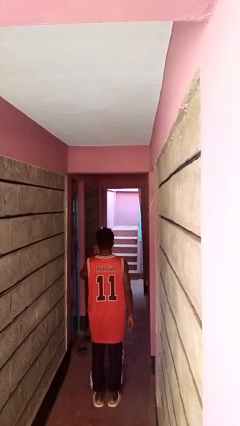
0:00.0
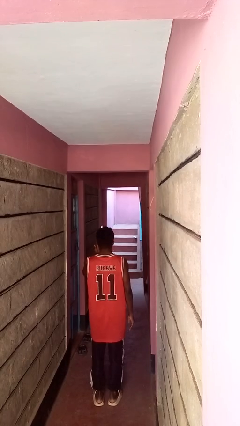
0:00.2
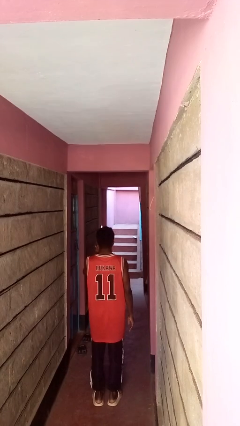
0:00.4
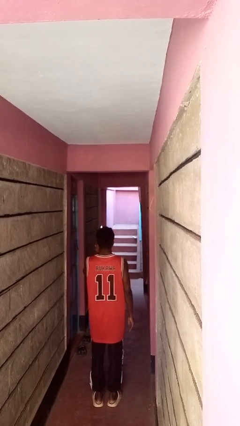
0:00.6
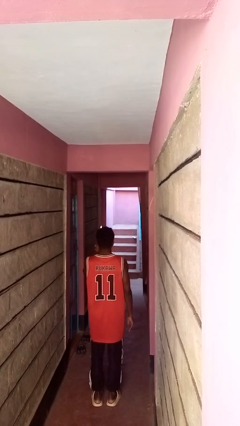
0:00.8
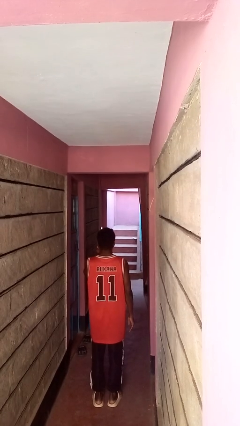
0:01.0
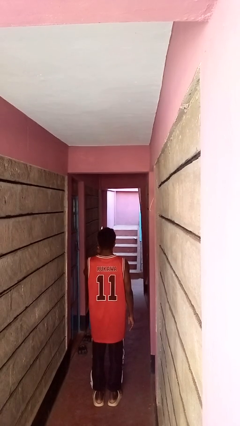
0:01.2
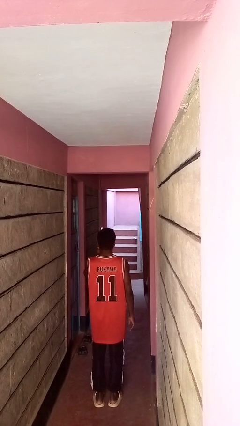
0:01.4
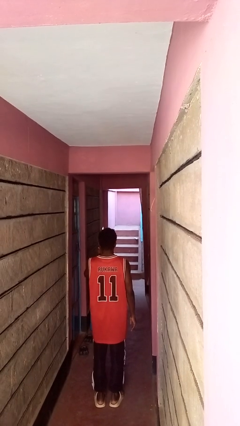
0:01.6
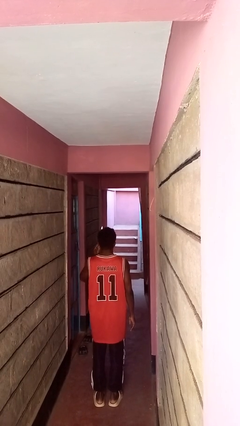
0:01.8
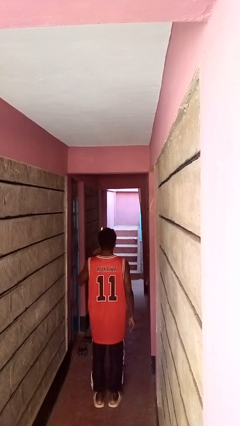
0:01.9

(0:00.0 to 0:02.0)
person rubs eyes

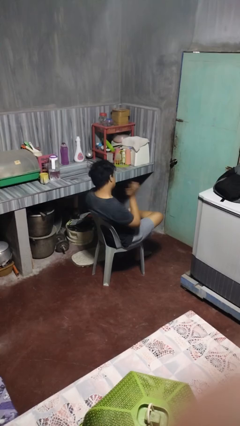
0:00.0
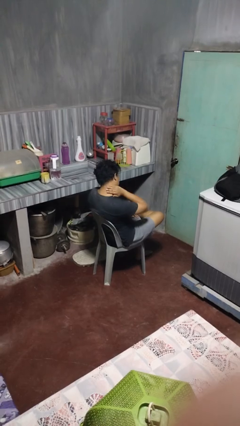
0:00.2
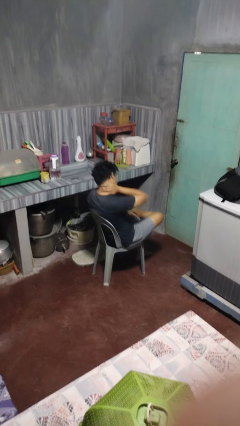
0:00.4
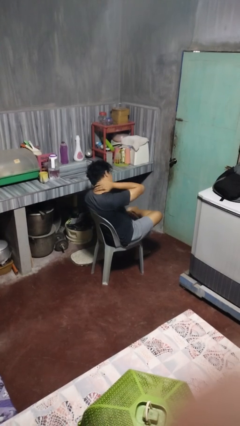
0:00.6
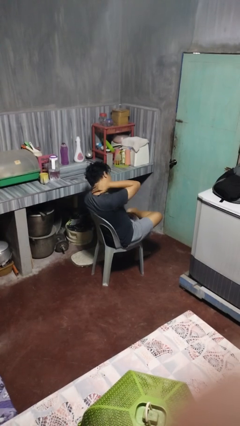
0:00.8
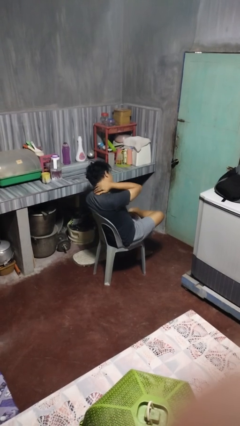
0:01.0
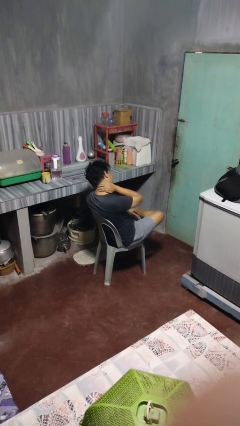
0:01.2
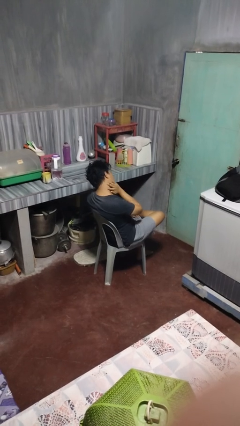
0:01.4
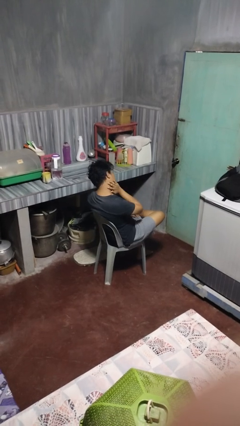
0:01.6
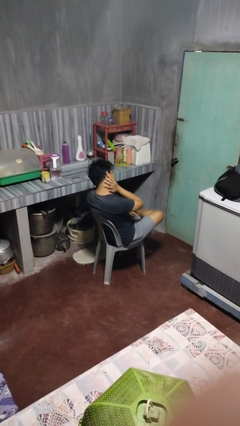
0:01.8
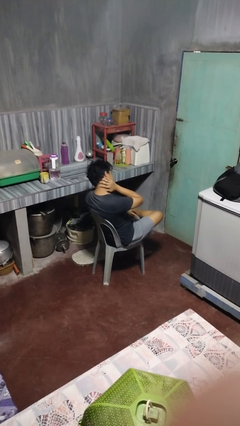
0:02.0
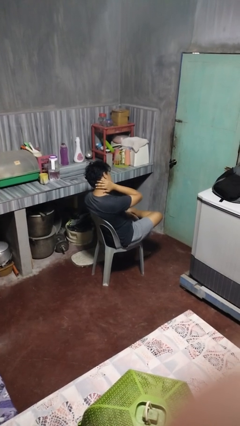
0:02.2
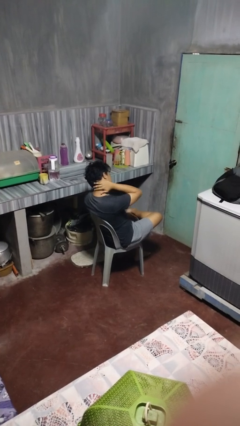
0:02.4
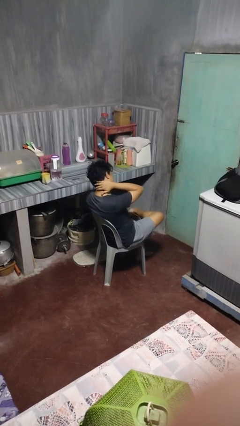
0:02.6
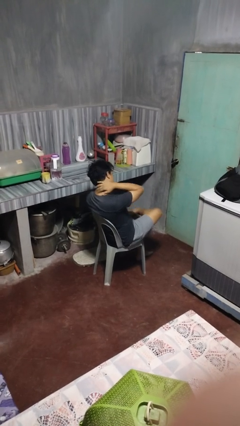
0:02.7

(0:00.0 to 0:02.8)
person rubs neck

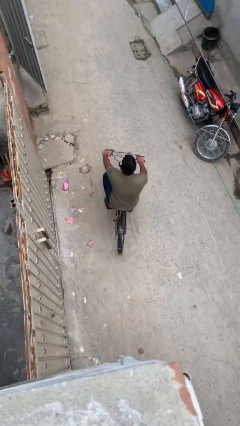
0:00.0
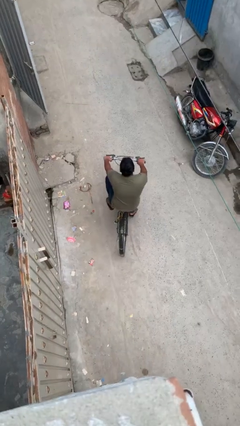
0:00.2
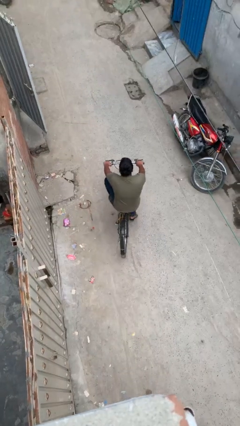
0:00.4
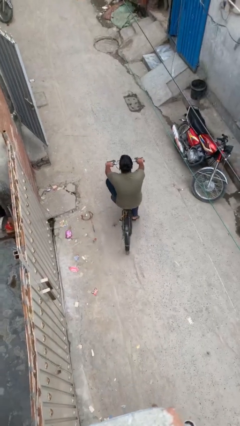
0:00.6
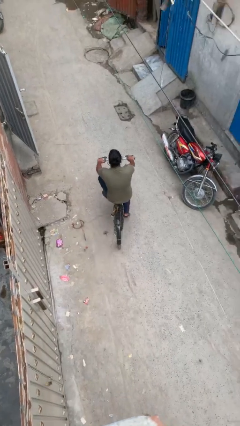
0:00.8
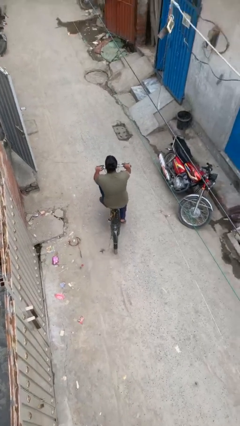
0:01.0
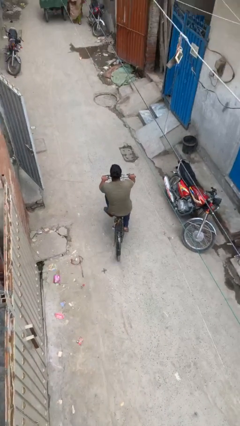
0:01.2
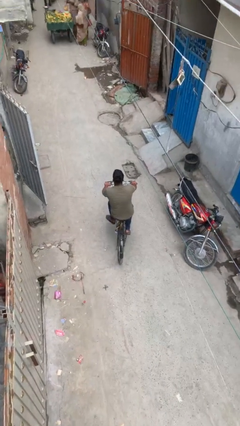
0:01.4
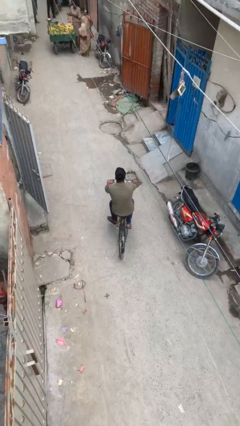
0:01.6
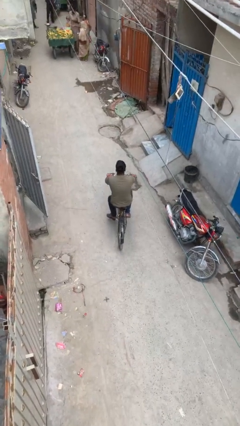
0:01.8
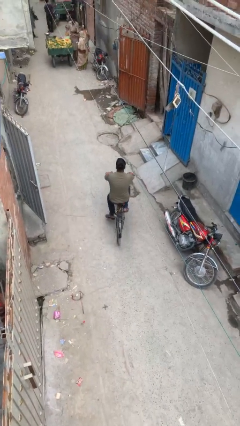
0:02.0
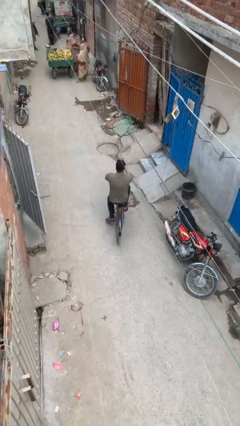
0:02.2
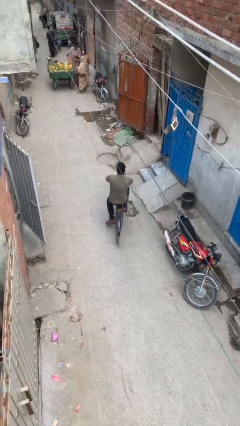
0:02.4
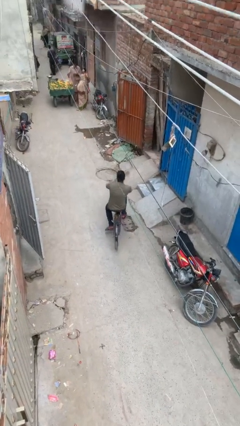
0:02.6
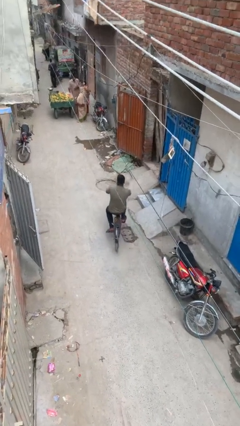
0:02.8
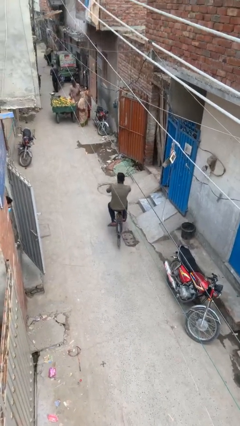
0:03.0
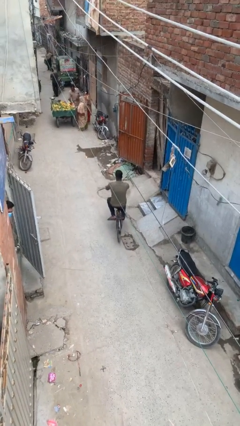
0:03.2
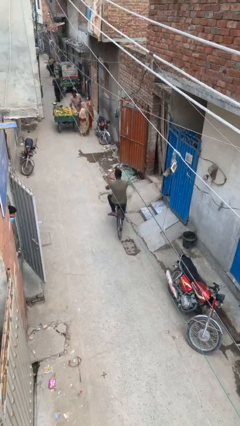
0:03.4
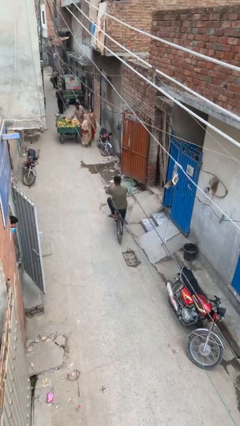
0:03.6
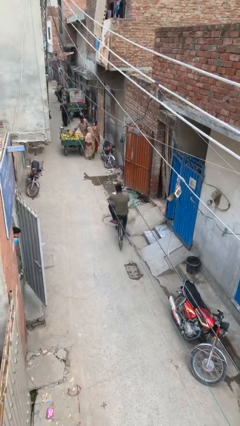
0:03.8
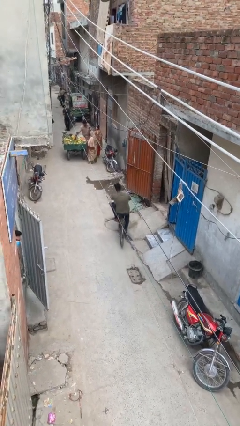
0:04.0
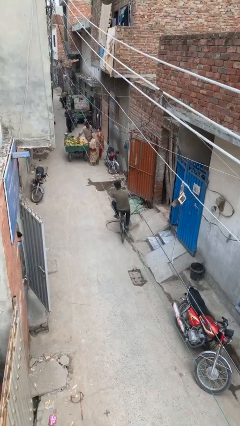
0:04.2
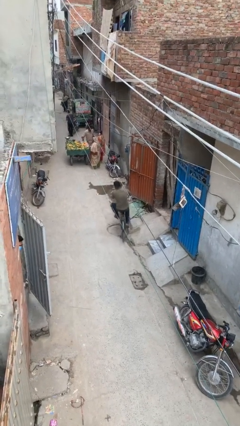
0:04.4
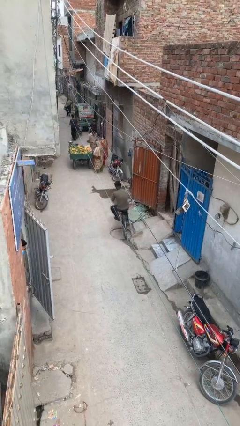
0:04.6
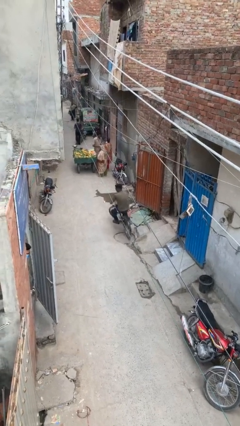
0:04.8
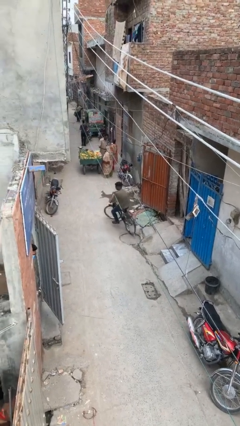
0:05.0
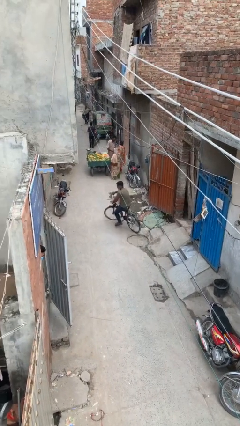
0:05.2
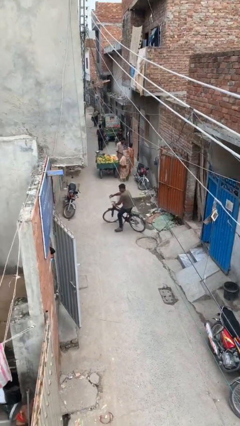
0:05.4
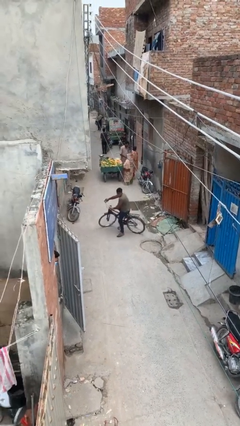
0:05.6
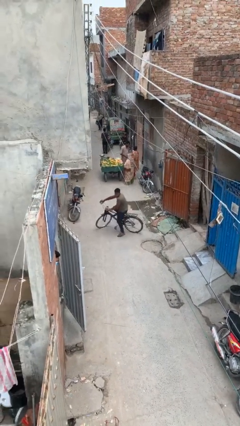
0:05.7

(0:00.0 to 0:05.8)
person rides bicycle

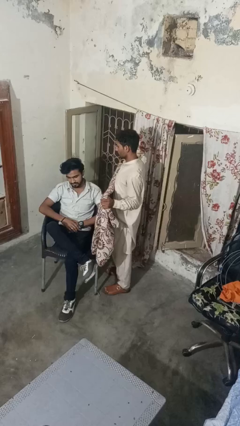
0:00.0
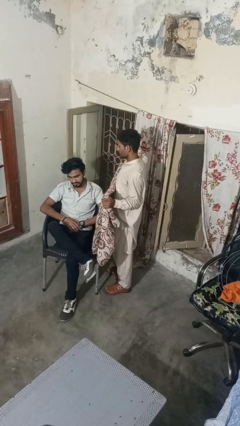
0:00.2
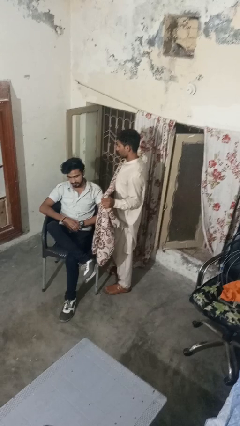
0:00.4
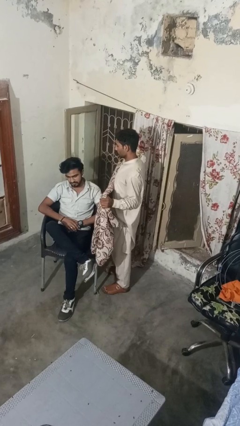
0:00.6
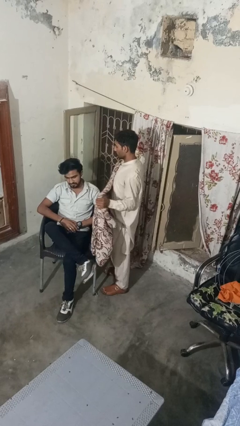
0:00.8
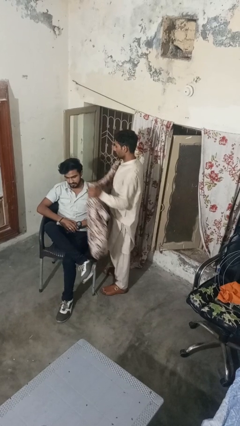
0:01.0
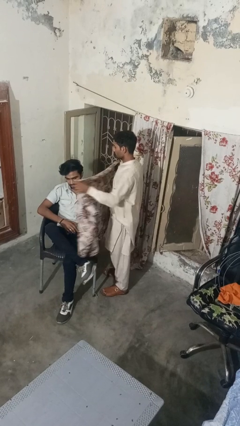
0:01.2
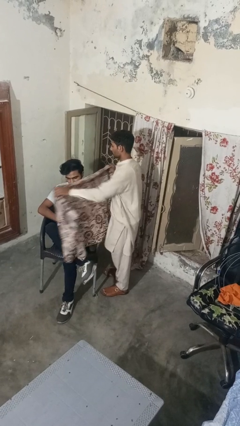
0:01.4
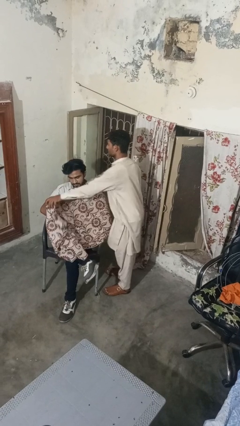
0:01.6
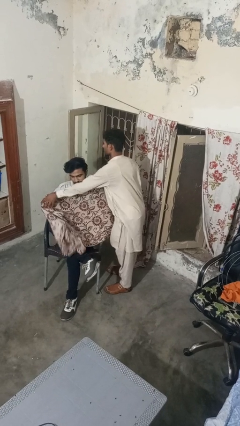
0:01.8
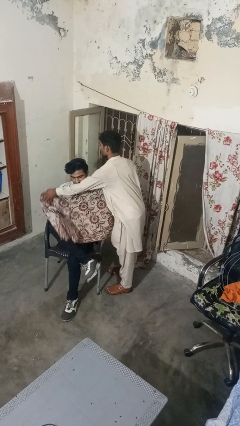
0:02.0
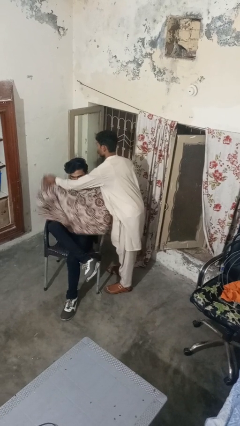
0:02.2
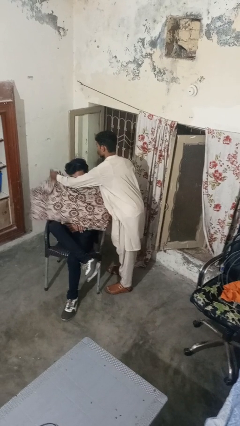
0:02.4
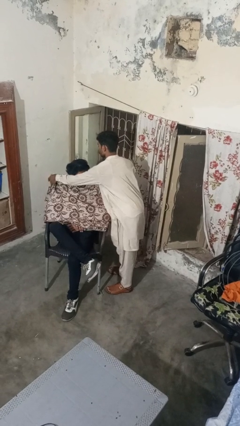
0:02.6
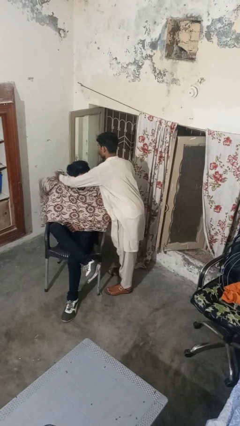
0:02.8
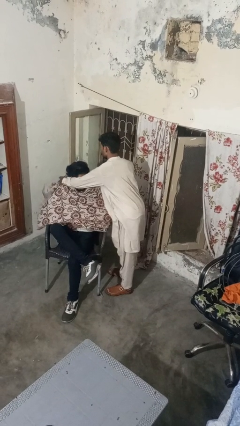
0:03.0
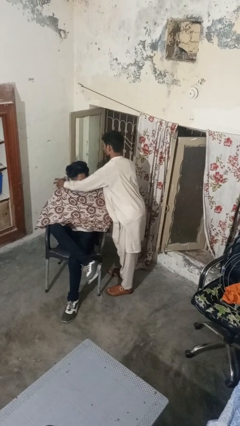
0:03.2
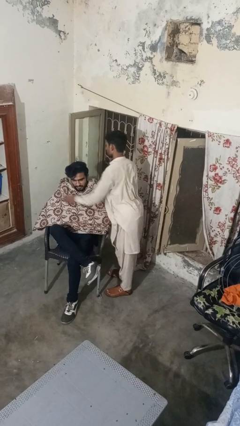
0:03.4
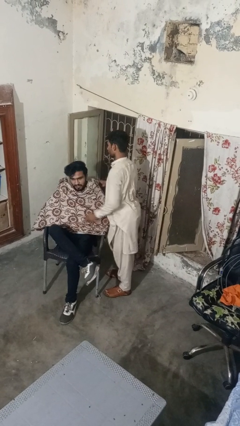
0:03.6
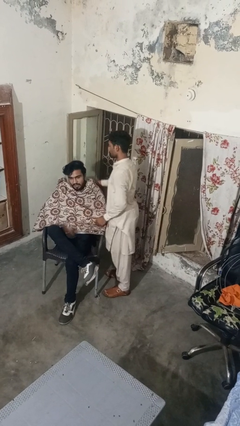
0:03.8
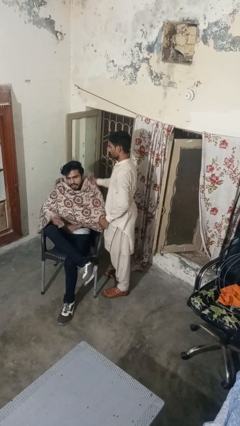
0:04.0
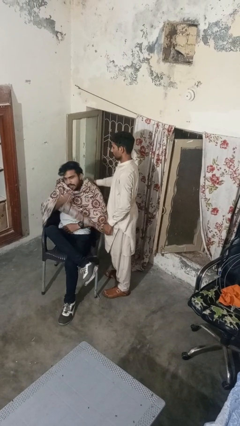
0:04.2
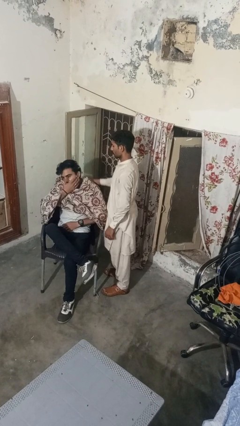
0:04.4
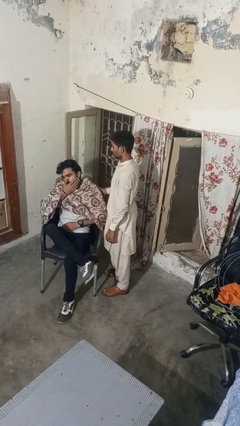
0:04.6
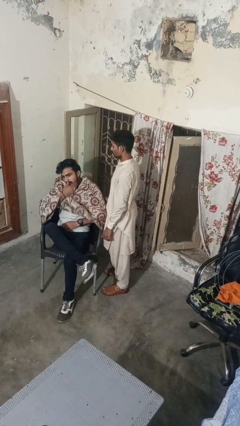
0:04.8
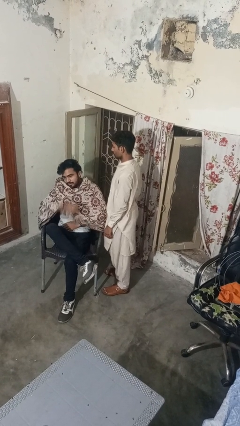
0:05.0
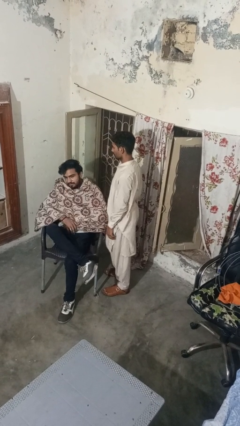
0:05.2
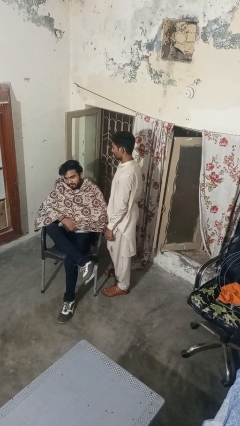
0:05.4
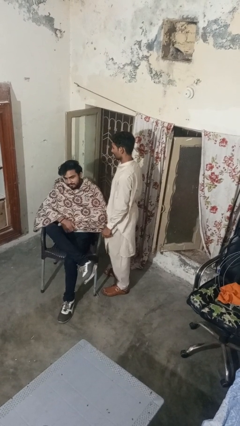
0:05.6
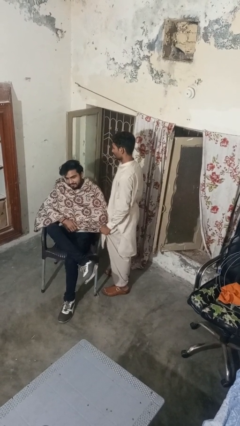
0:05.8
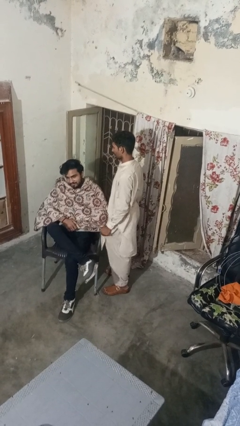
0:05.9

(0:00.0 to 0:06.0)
person covers friend with blanket

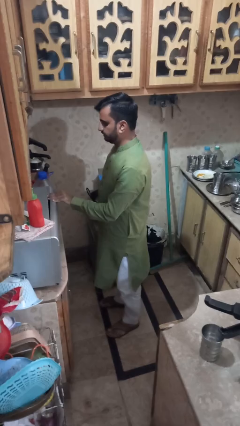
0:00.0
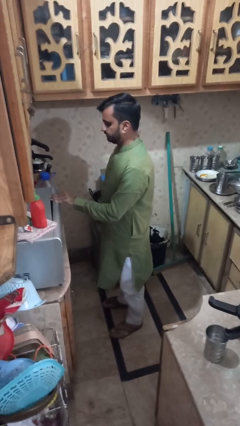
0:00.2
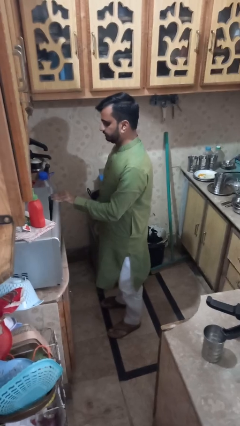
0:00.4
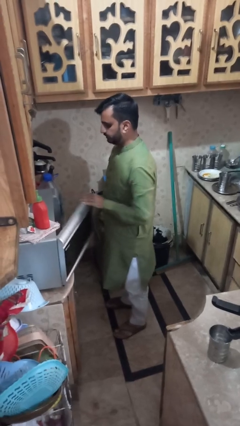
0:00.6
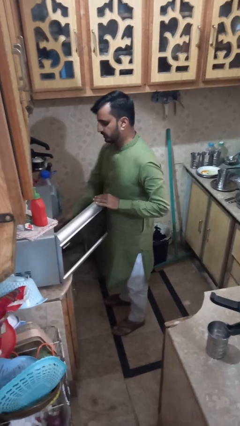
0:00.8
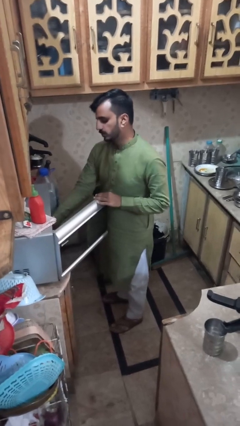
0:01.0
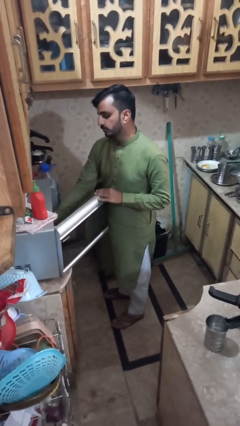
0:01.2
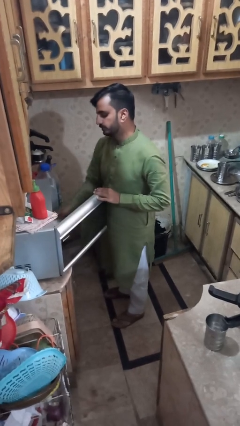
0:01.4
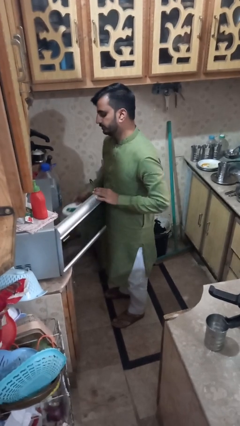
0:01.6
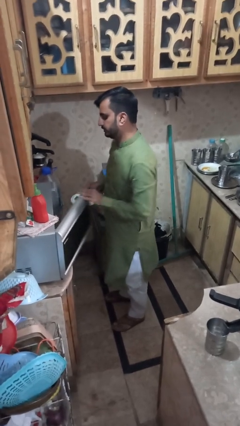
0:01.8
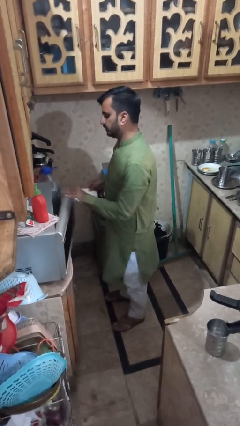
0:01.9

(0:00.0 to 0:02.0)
person takes object from microwave
